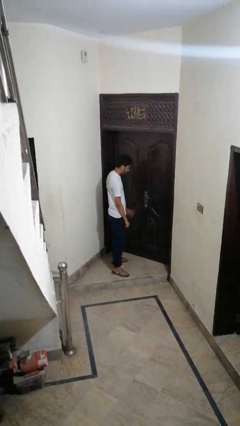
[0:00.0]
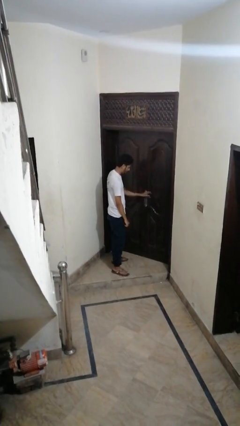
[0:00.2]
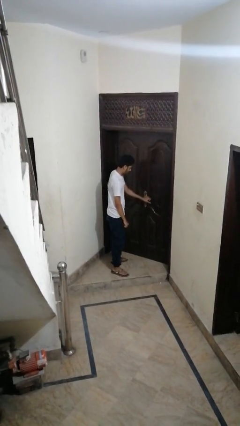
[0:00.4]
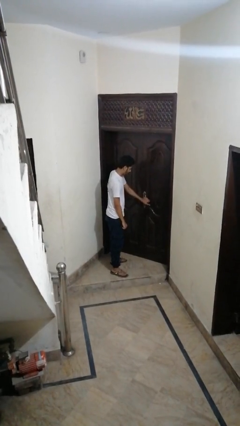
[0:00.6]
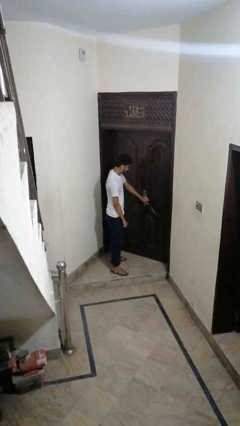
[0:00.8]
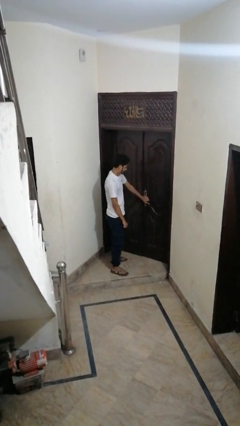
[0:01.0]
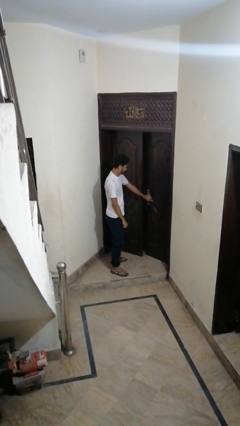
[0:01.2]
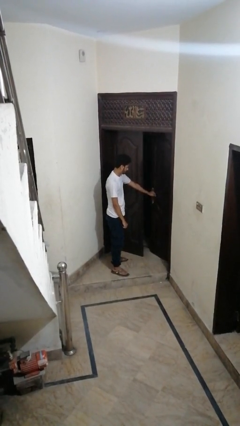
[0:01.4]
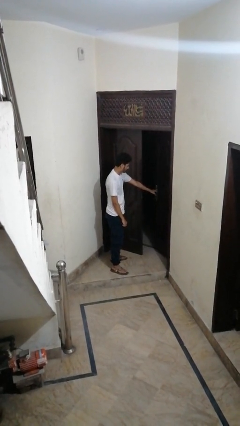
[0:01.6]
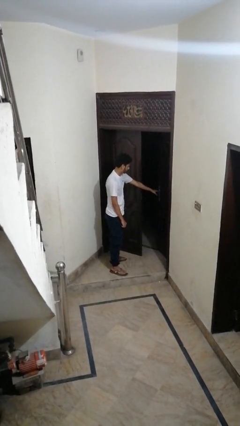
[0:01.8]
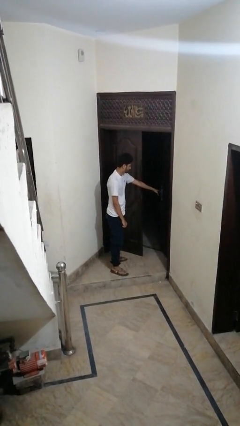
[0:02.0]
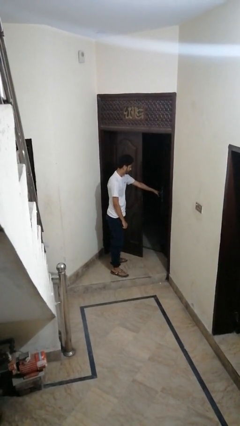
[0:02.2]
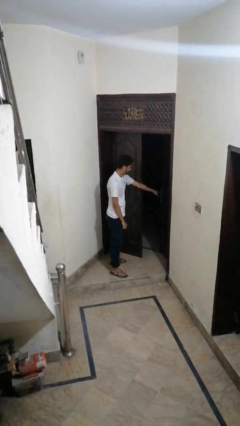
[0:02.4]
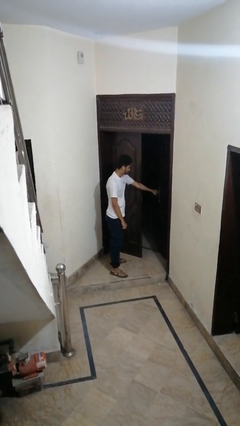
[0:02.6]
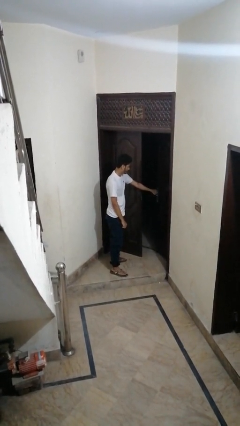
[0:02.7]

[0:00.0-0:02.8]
person opens facility door

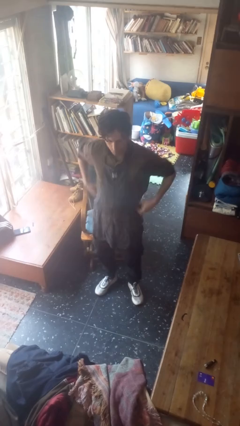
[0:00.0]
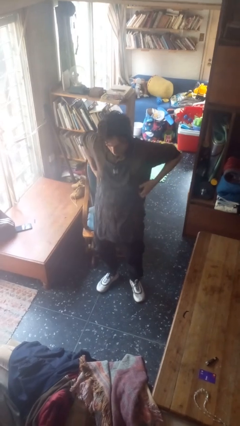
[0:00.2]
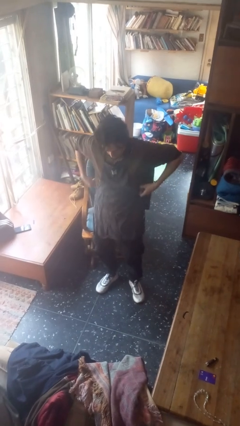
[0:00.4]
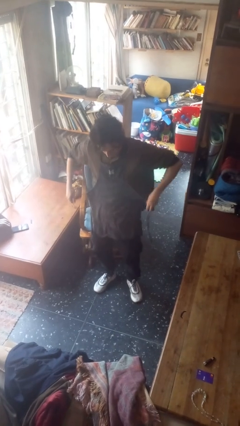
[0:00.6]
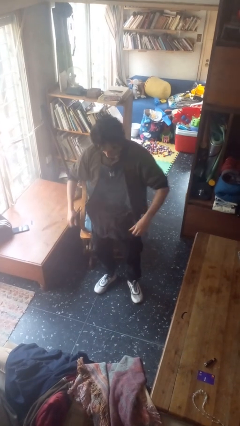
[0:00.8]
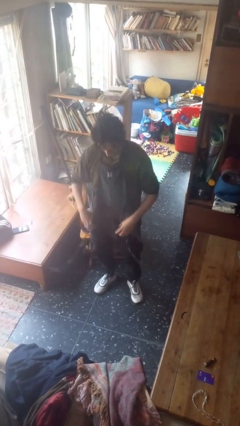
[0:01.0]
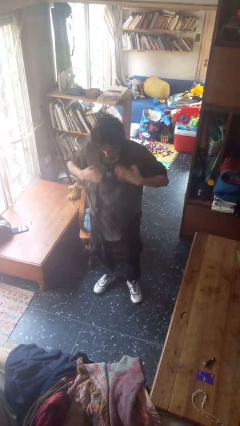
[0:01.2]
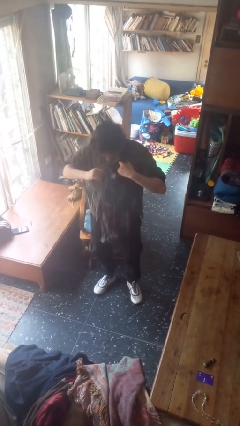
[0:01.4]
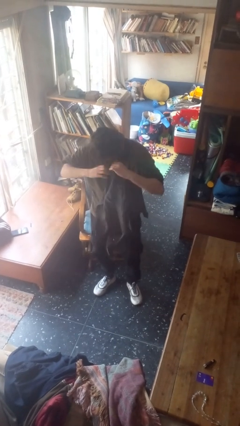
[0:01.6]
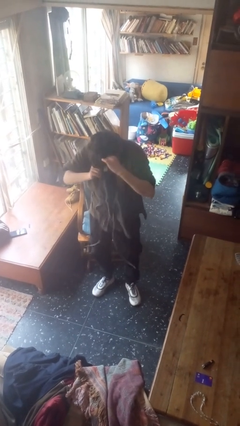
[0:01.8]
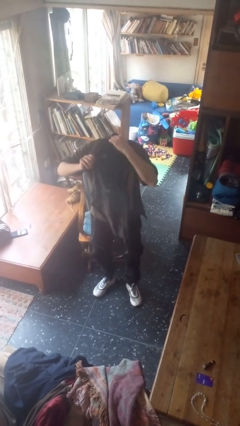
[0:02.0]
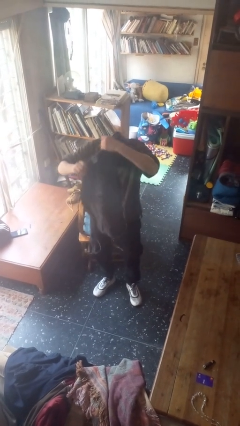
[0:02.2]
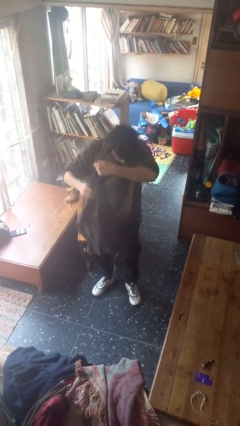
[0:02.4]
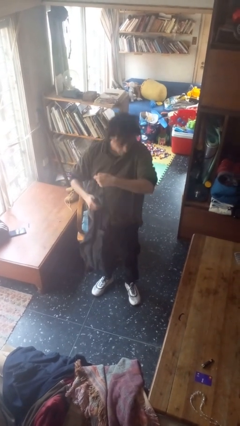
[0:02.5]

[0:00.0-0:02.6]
person takes off apron

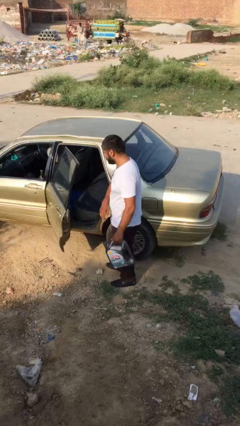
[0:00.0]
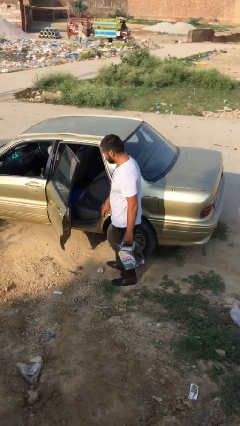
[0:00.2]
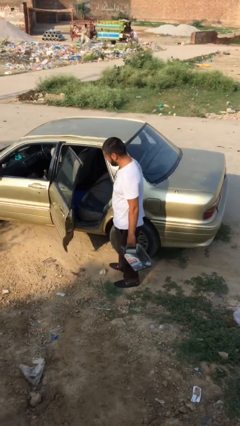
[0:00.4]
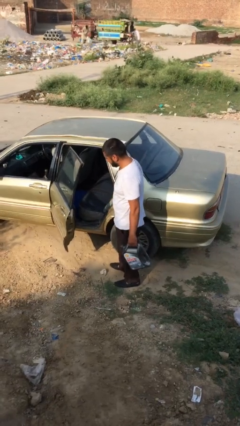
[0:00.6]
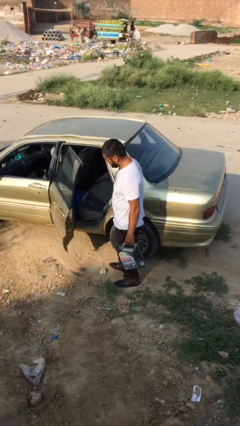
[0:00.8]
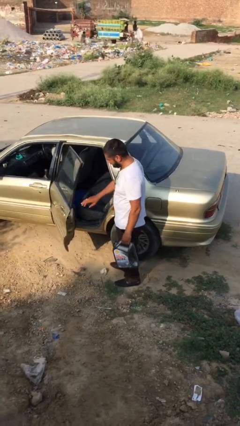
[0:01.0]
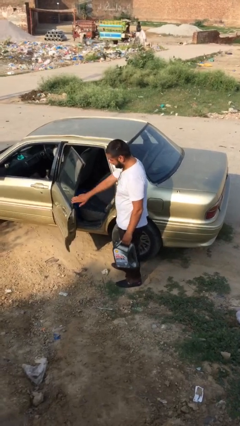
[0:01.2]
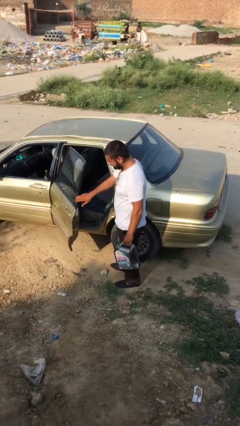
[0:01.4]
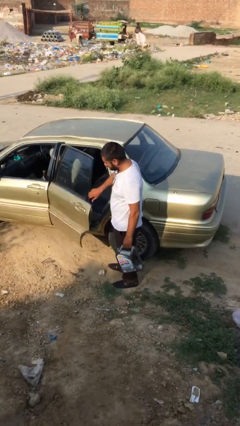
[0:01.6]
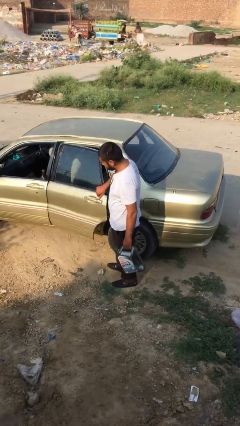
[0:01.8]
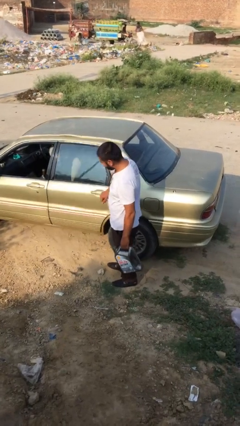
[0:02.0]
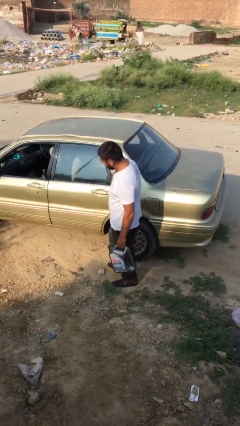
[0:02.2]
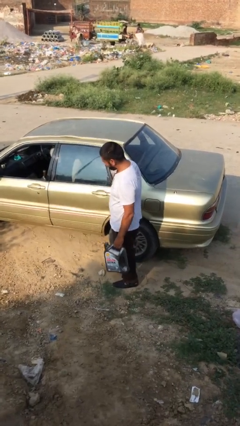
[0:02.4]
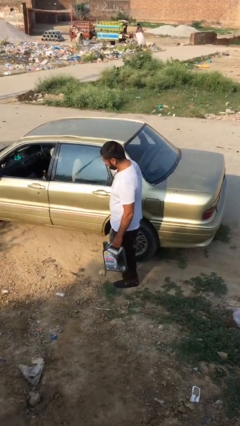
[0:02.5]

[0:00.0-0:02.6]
person closes car door

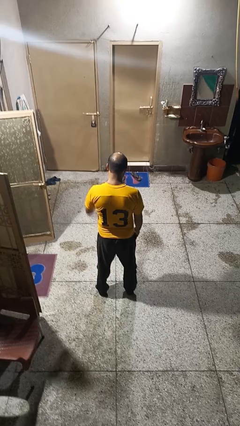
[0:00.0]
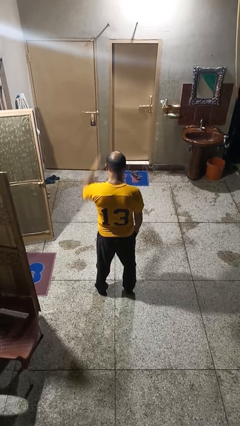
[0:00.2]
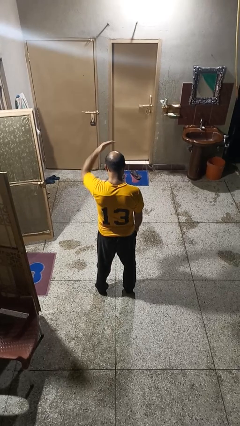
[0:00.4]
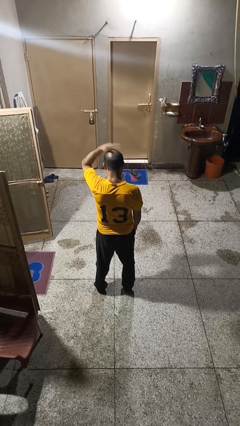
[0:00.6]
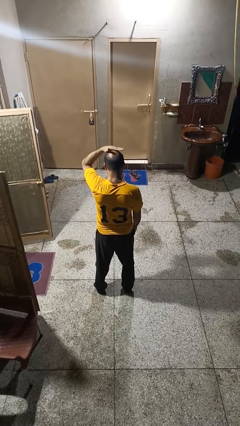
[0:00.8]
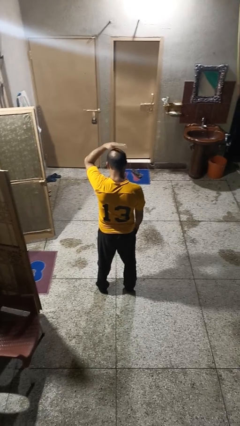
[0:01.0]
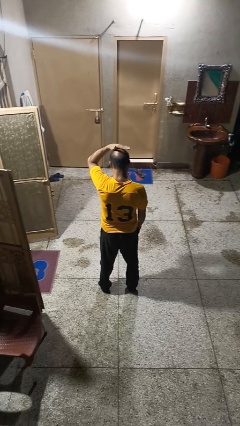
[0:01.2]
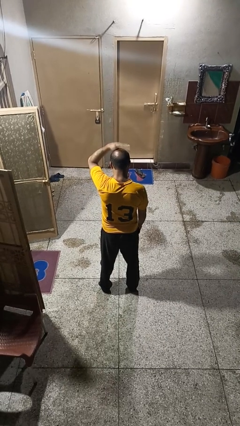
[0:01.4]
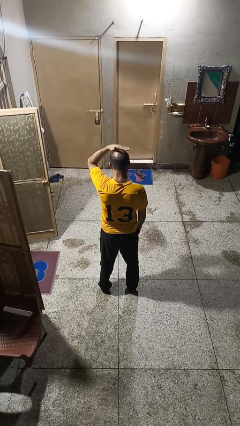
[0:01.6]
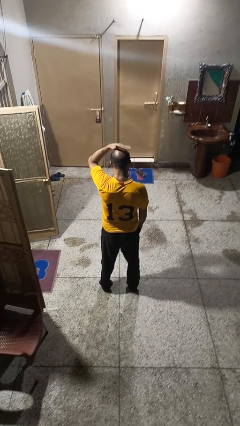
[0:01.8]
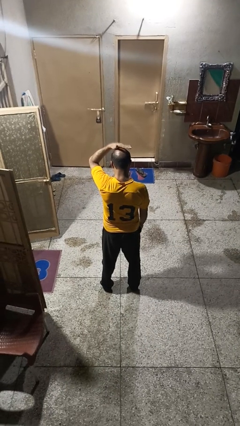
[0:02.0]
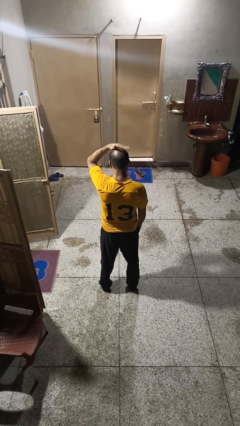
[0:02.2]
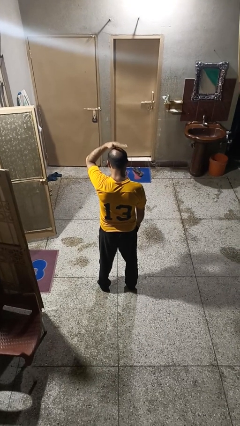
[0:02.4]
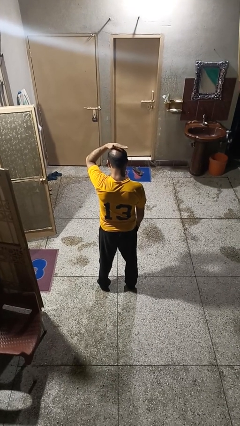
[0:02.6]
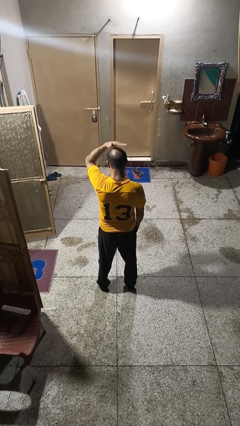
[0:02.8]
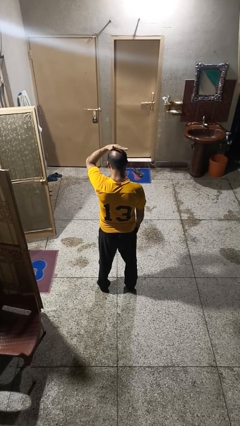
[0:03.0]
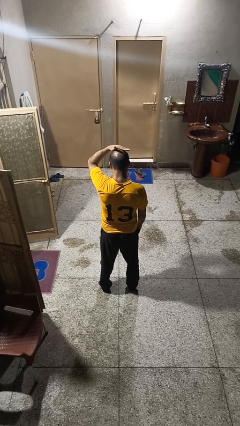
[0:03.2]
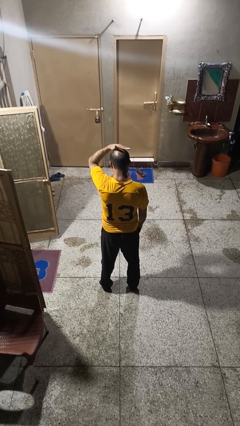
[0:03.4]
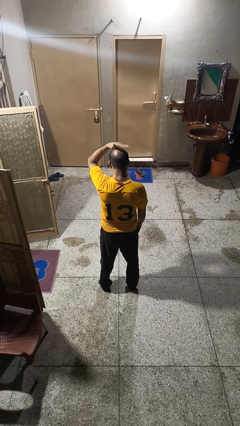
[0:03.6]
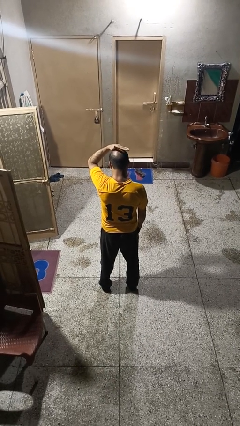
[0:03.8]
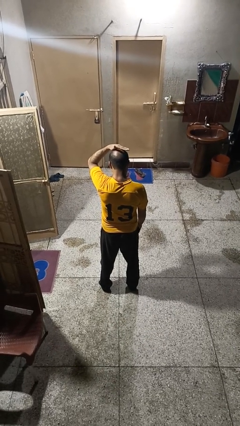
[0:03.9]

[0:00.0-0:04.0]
person pats head

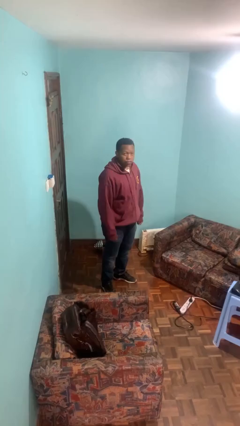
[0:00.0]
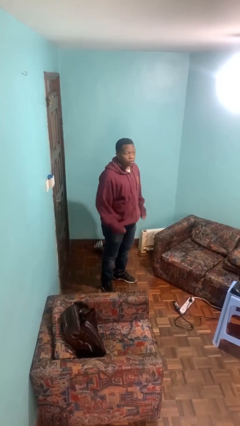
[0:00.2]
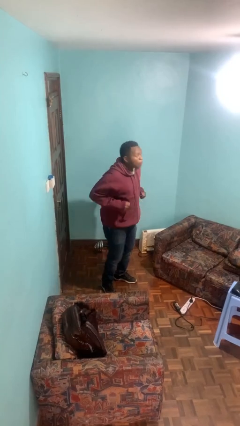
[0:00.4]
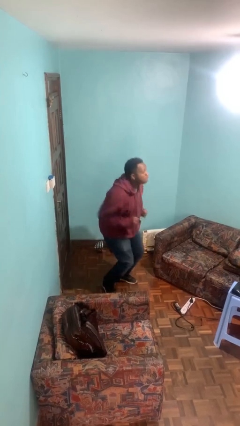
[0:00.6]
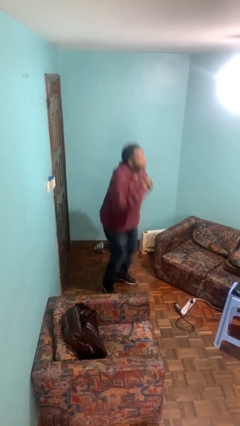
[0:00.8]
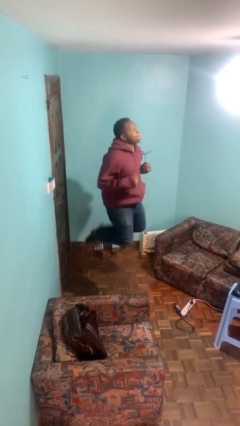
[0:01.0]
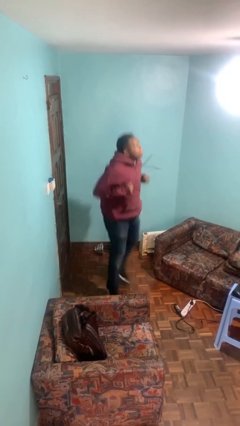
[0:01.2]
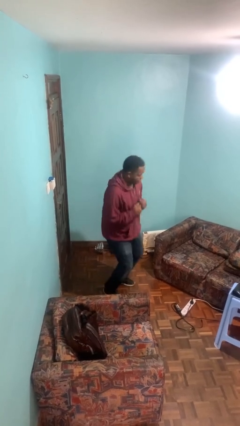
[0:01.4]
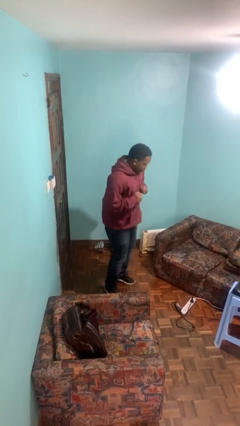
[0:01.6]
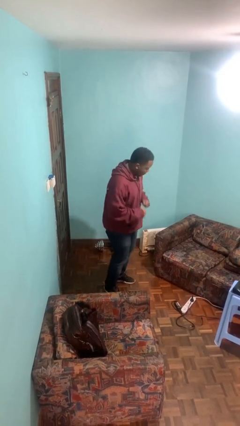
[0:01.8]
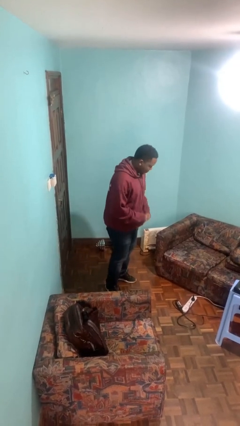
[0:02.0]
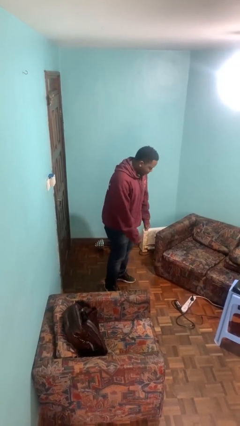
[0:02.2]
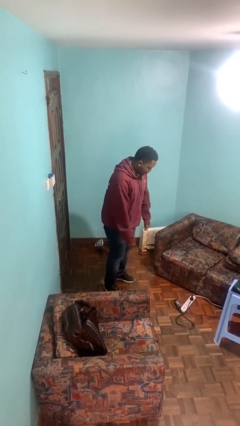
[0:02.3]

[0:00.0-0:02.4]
person jumps

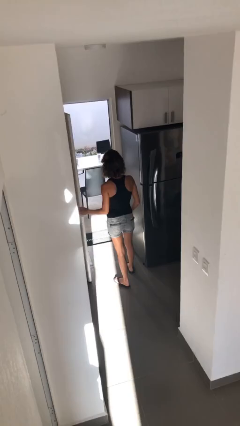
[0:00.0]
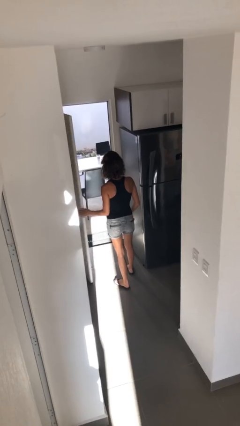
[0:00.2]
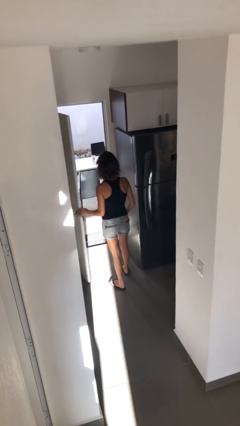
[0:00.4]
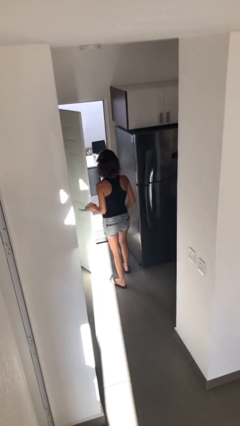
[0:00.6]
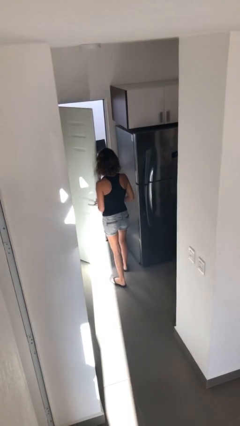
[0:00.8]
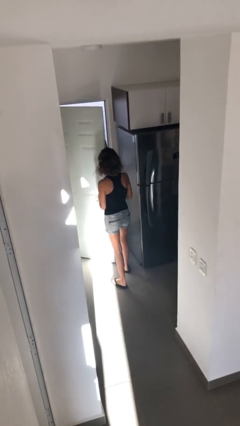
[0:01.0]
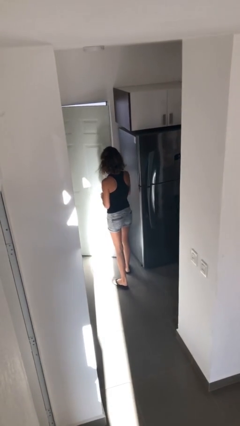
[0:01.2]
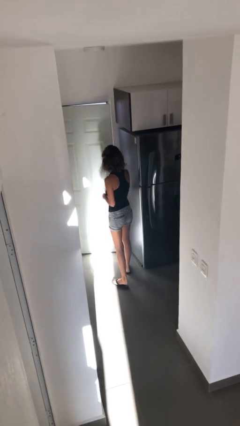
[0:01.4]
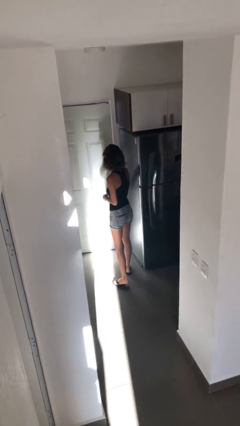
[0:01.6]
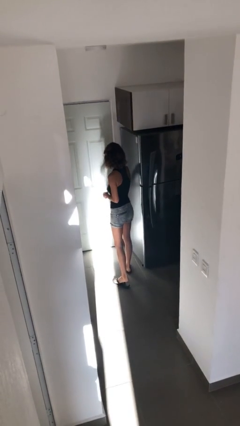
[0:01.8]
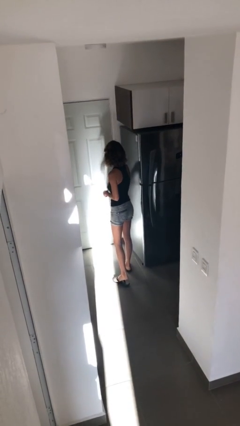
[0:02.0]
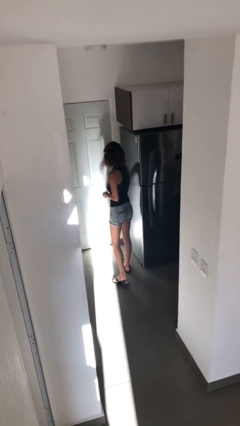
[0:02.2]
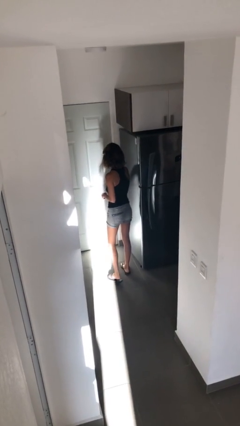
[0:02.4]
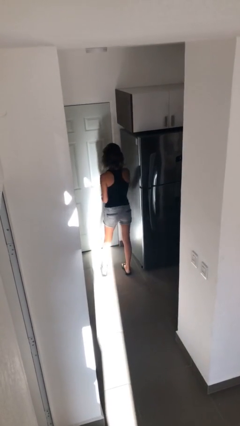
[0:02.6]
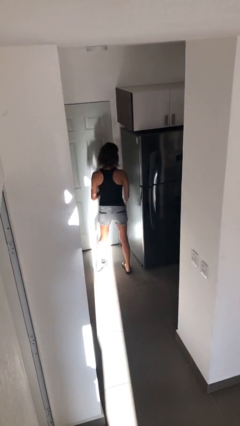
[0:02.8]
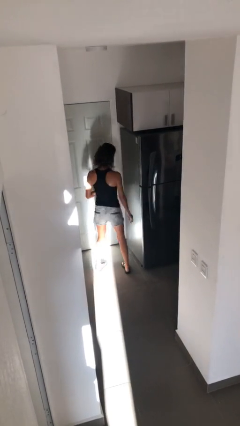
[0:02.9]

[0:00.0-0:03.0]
person closes facility door
